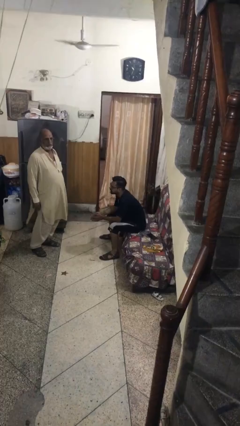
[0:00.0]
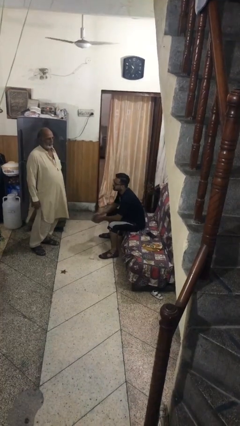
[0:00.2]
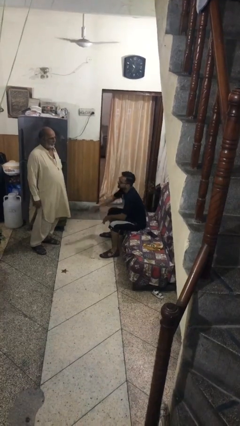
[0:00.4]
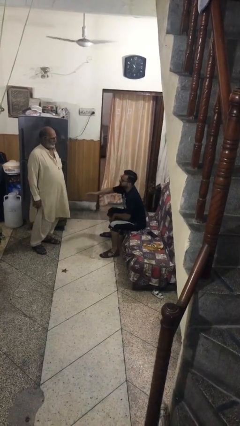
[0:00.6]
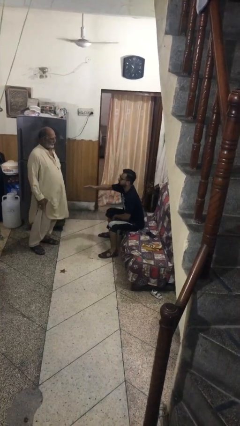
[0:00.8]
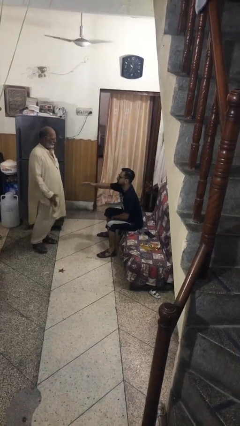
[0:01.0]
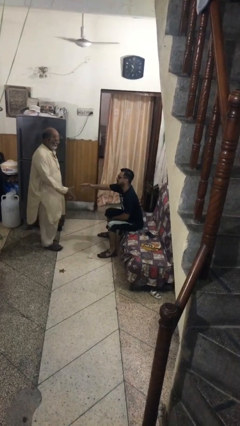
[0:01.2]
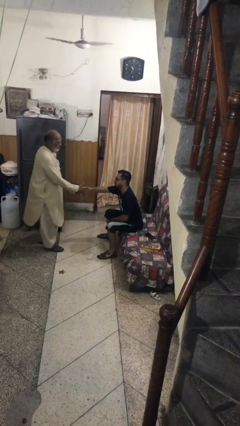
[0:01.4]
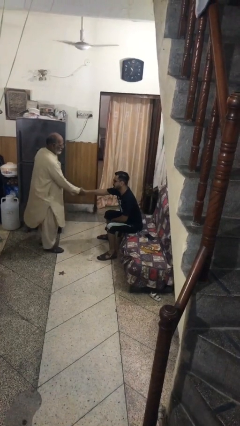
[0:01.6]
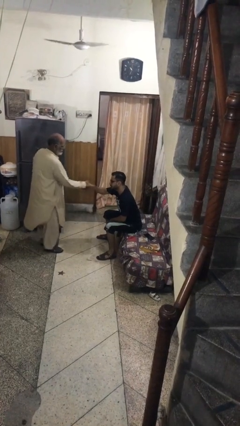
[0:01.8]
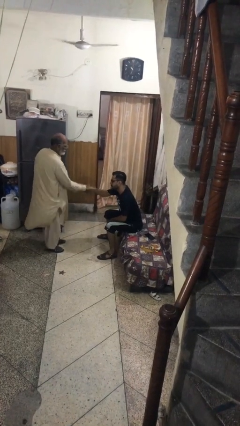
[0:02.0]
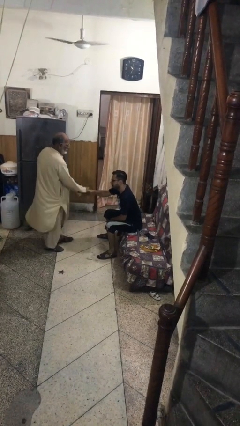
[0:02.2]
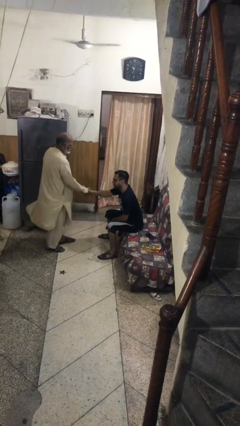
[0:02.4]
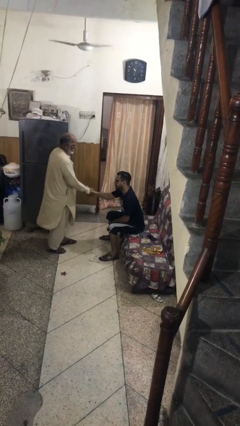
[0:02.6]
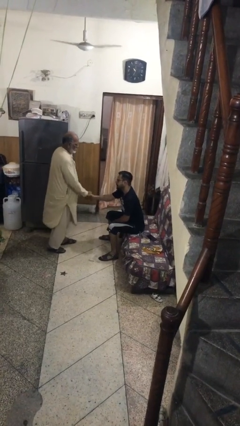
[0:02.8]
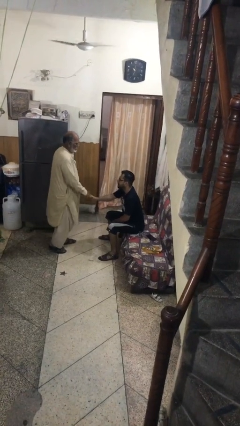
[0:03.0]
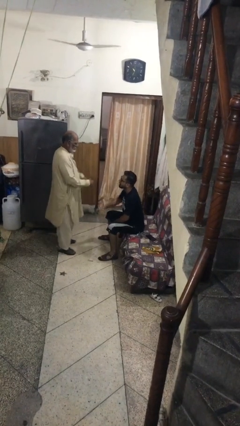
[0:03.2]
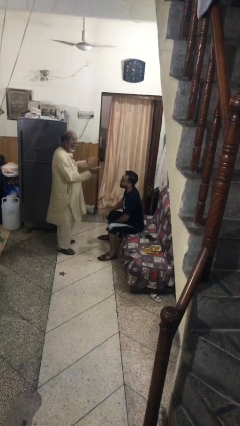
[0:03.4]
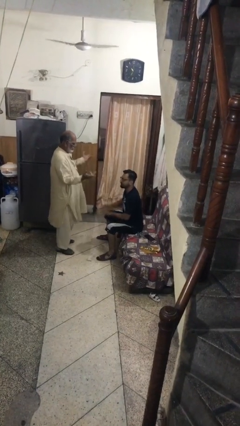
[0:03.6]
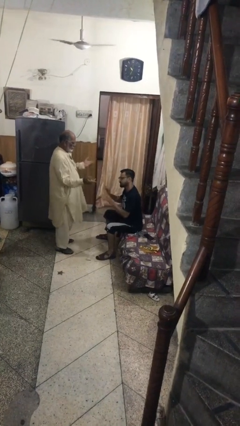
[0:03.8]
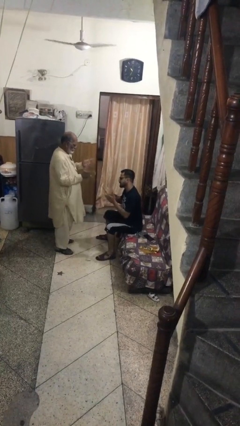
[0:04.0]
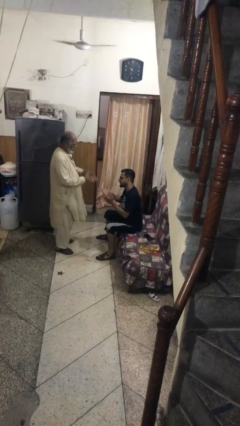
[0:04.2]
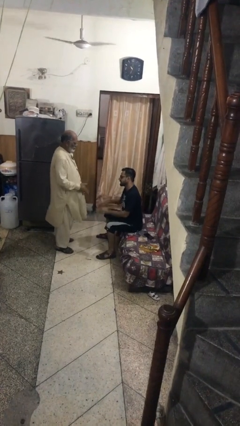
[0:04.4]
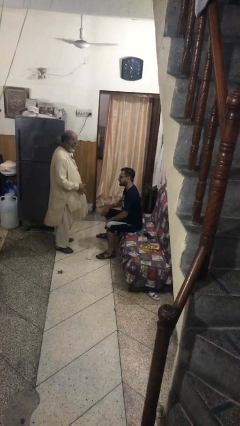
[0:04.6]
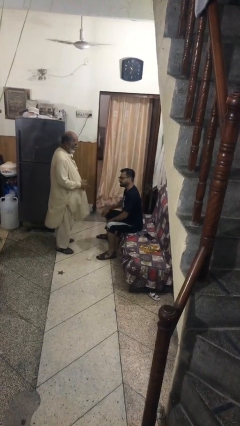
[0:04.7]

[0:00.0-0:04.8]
person shakes hand

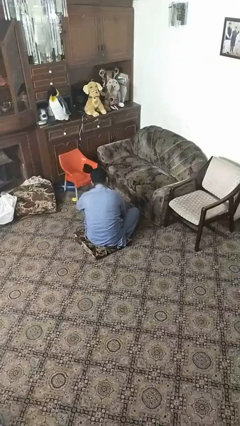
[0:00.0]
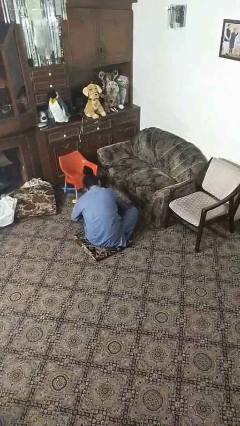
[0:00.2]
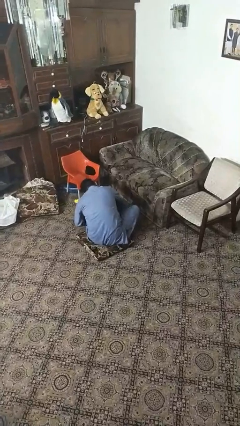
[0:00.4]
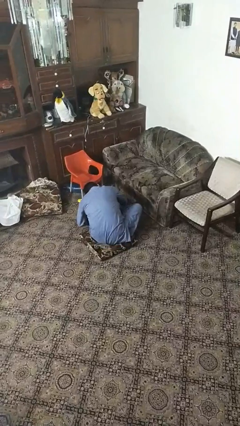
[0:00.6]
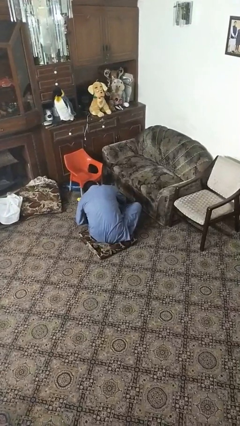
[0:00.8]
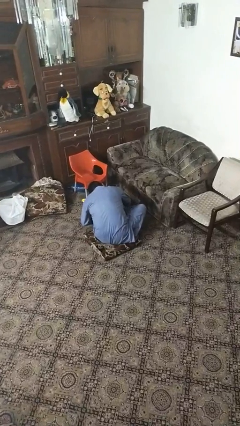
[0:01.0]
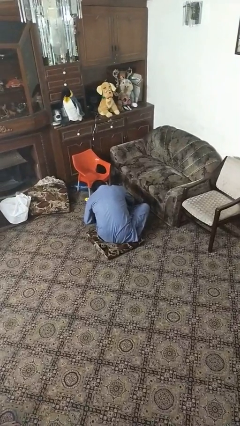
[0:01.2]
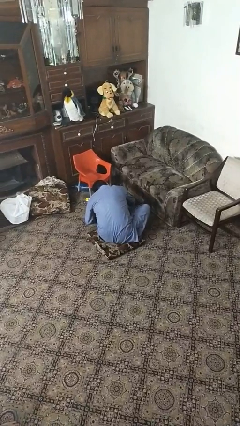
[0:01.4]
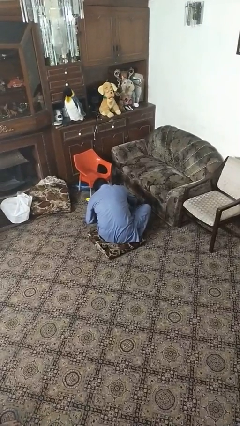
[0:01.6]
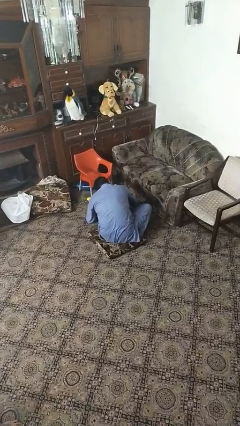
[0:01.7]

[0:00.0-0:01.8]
person searches under couch

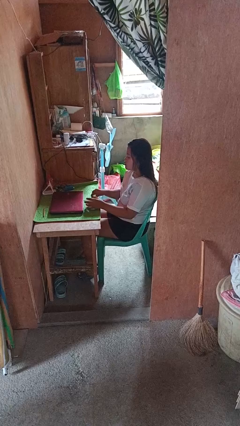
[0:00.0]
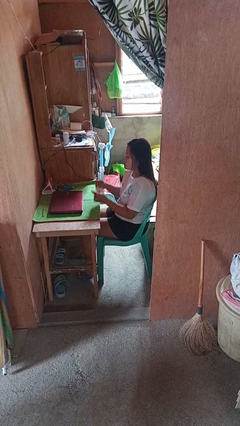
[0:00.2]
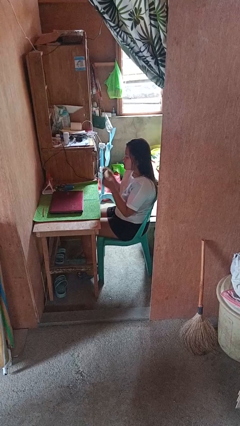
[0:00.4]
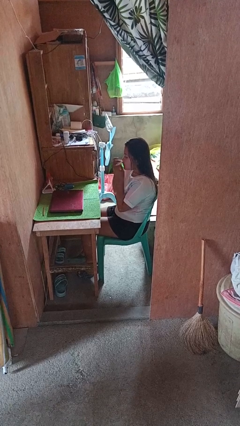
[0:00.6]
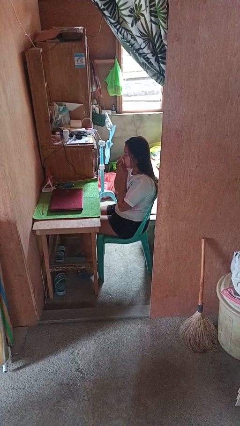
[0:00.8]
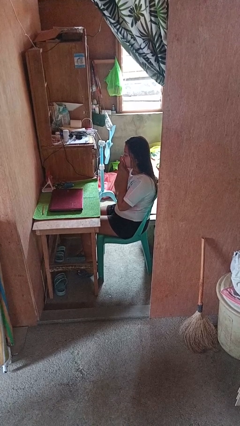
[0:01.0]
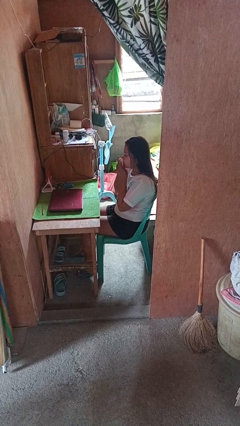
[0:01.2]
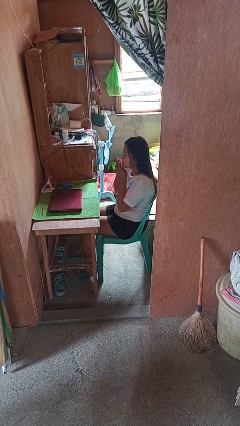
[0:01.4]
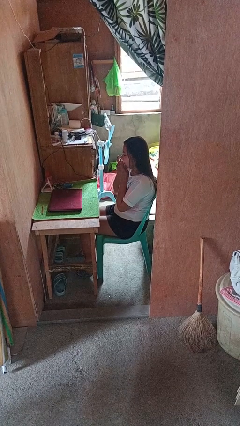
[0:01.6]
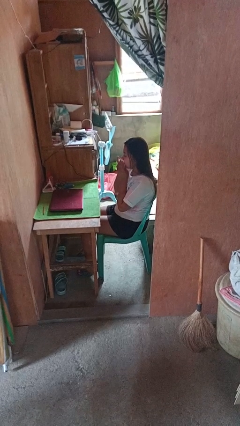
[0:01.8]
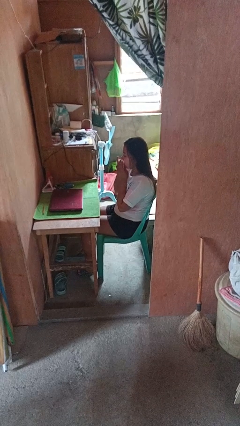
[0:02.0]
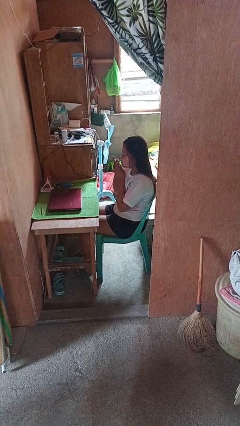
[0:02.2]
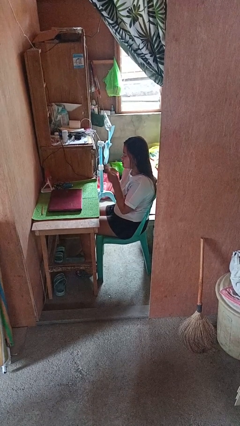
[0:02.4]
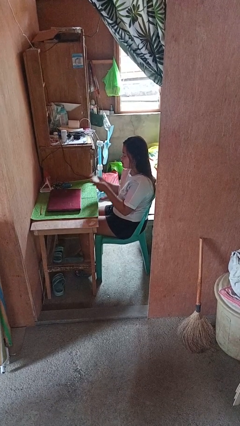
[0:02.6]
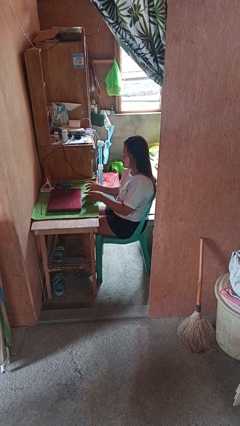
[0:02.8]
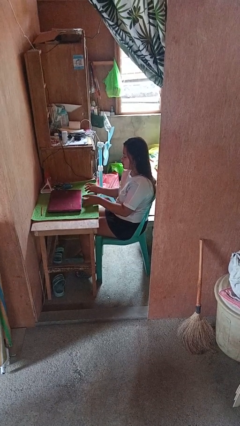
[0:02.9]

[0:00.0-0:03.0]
person wipes mouth with napkin

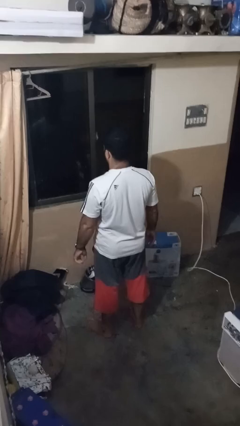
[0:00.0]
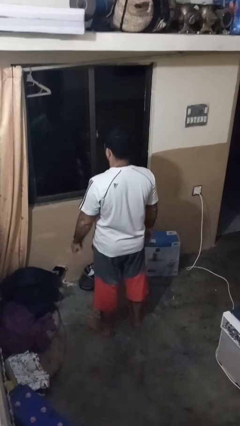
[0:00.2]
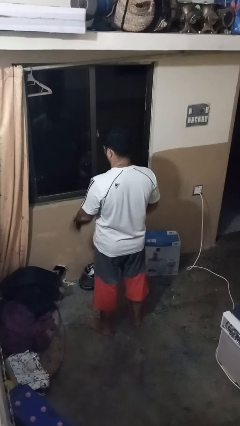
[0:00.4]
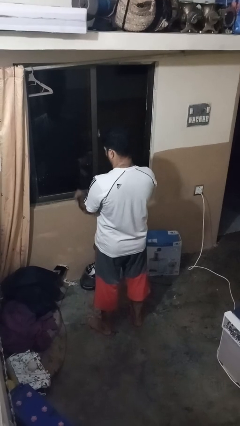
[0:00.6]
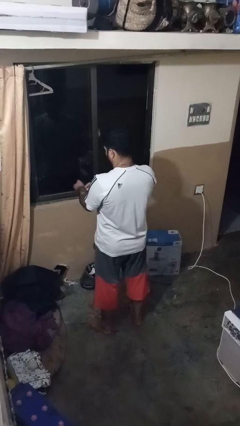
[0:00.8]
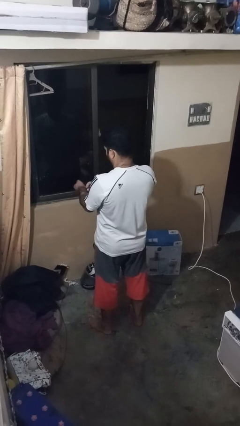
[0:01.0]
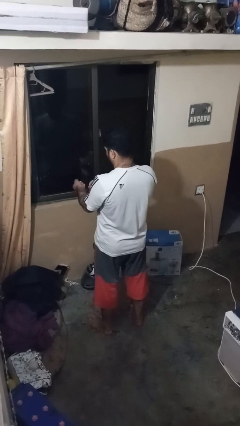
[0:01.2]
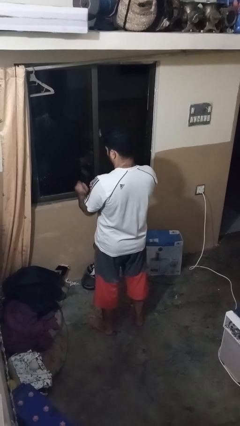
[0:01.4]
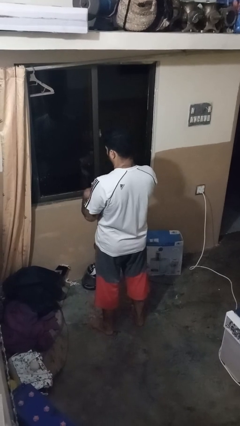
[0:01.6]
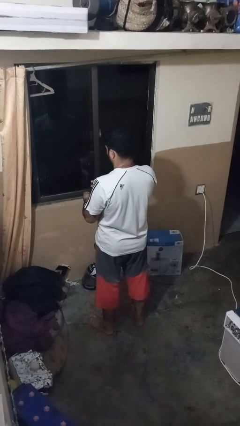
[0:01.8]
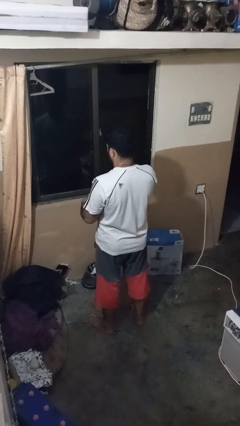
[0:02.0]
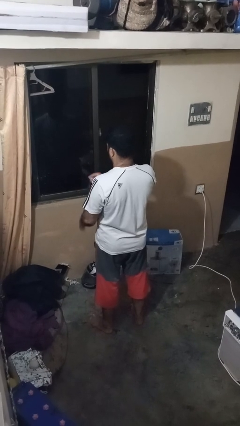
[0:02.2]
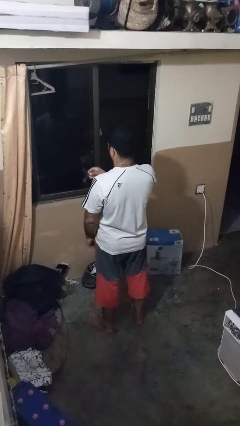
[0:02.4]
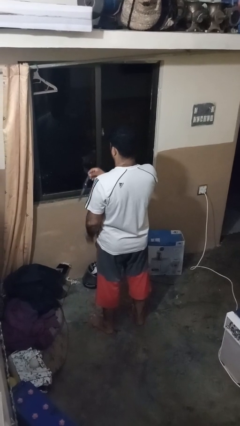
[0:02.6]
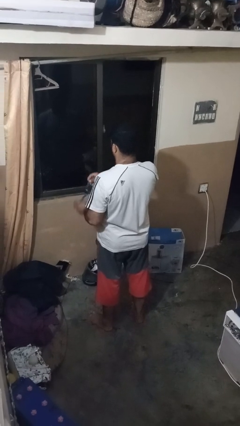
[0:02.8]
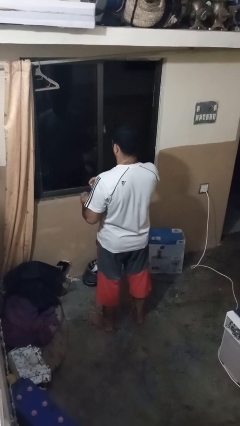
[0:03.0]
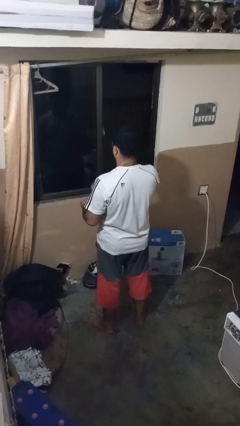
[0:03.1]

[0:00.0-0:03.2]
person takes off wristwatch

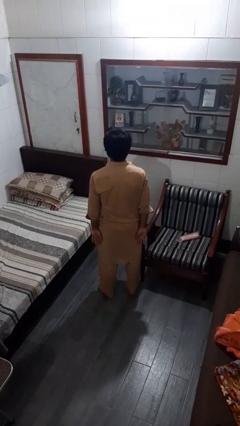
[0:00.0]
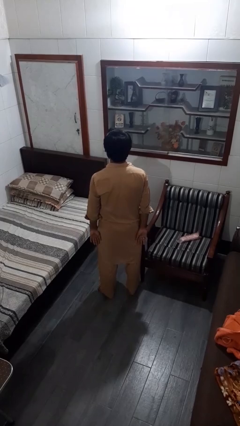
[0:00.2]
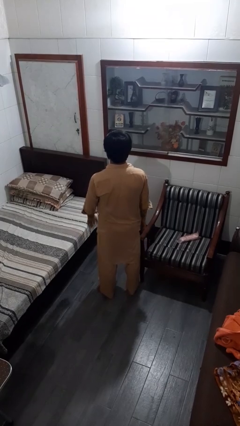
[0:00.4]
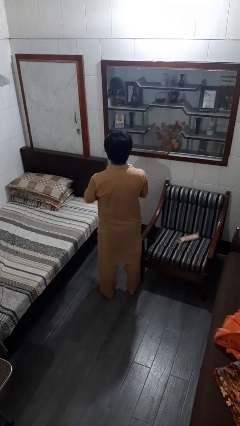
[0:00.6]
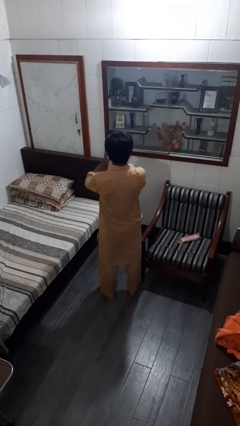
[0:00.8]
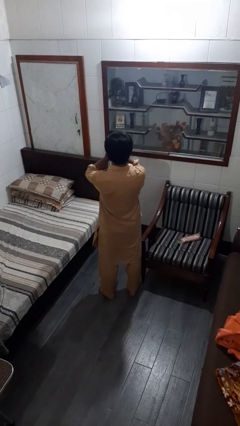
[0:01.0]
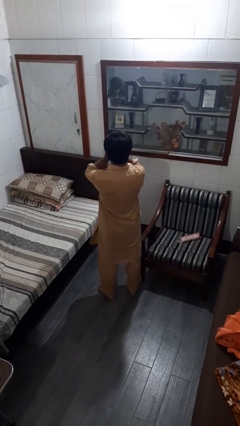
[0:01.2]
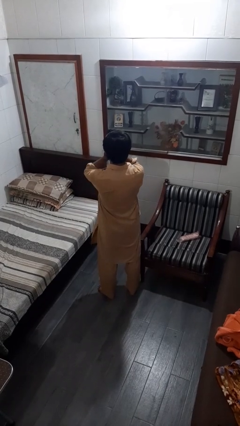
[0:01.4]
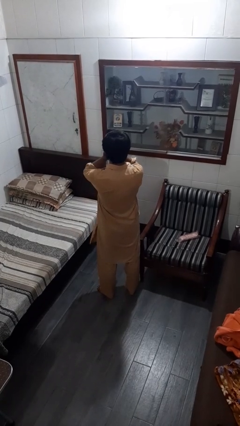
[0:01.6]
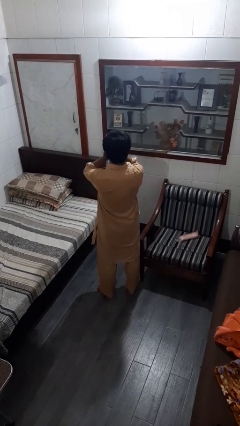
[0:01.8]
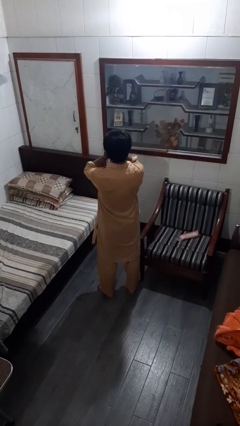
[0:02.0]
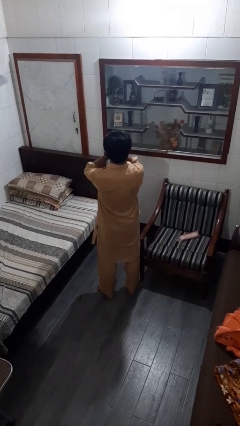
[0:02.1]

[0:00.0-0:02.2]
person covers face with hands

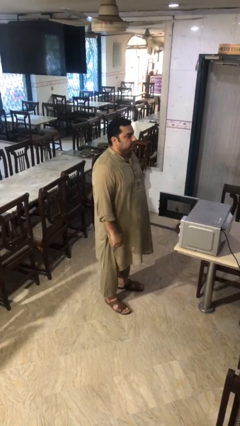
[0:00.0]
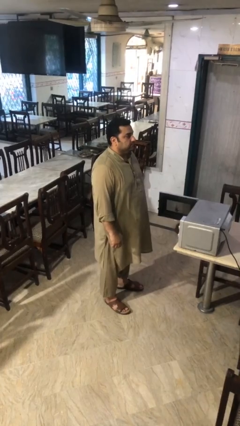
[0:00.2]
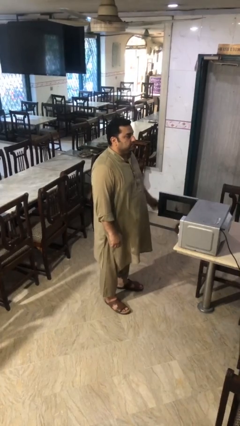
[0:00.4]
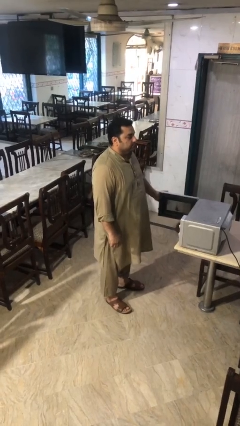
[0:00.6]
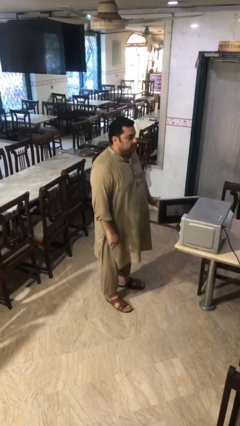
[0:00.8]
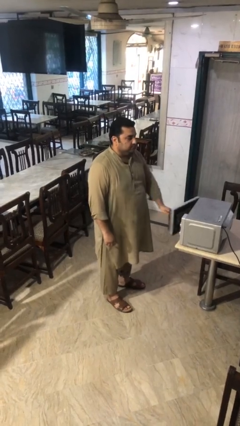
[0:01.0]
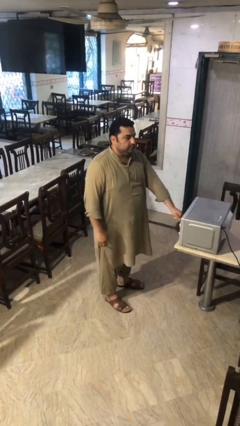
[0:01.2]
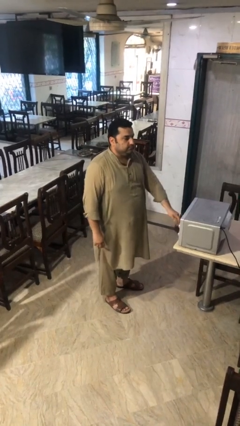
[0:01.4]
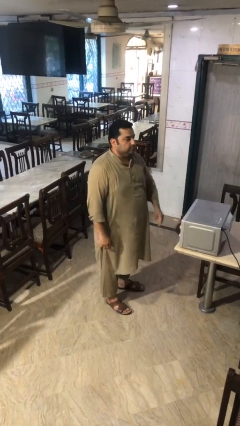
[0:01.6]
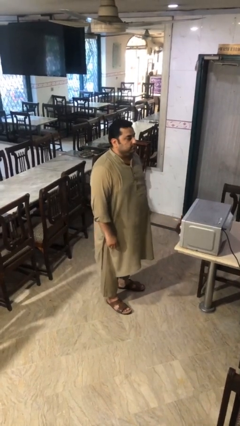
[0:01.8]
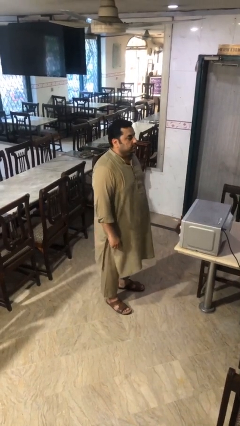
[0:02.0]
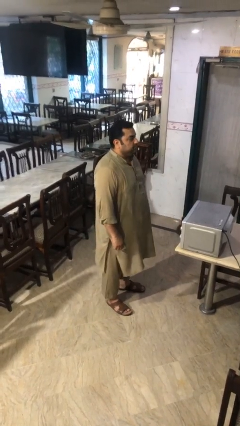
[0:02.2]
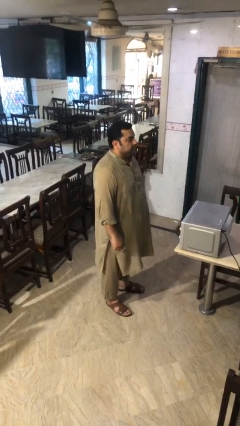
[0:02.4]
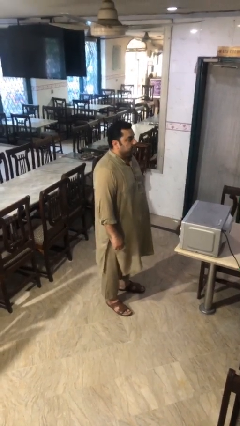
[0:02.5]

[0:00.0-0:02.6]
person closes microwave
